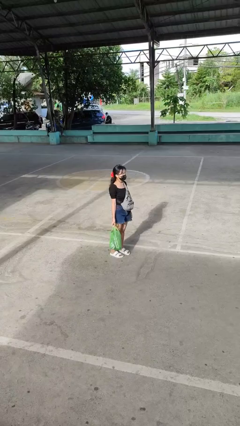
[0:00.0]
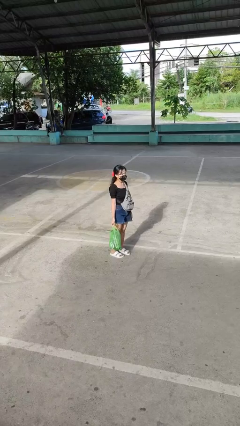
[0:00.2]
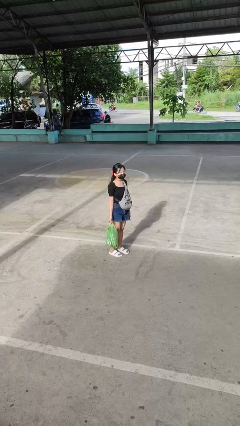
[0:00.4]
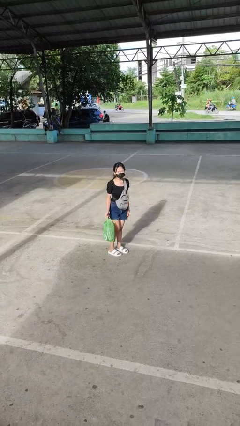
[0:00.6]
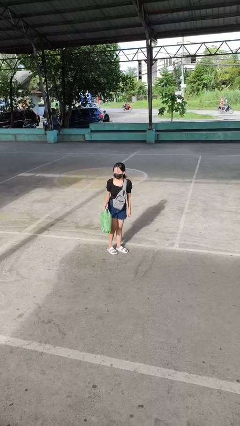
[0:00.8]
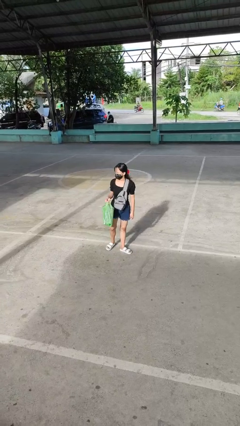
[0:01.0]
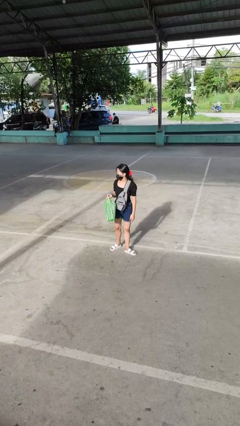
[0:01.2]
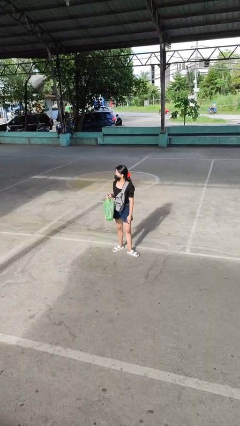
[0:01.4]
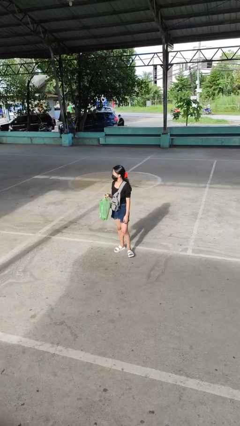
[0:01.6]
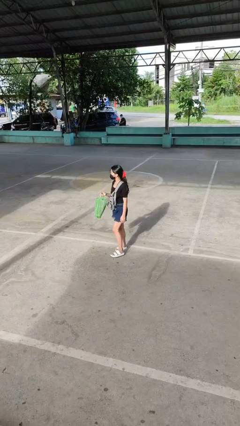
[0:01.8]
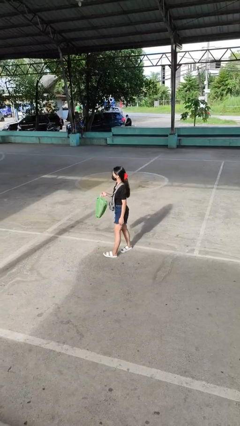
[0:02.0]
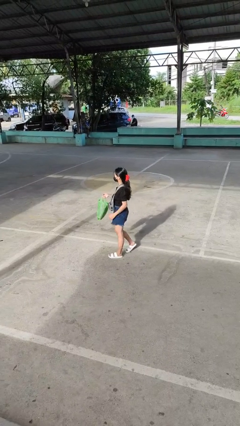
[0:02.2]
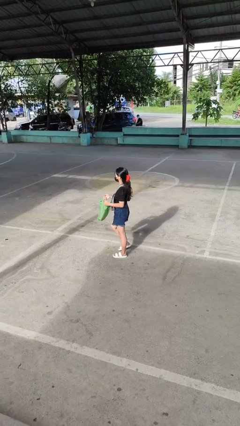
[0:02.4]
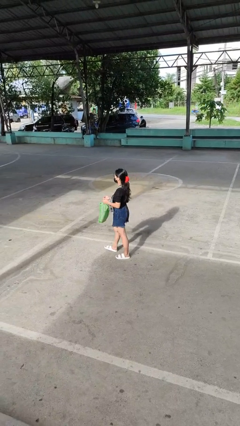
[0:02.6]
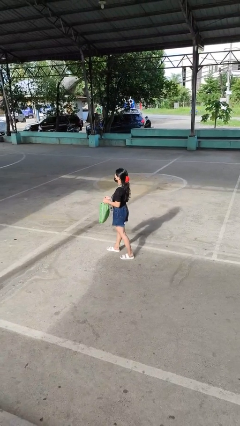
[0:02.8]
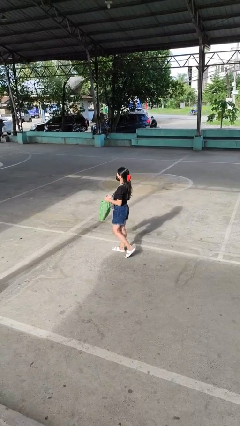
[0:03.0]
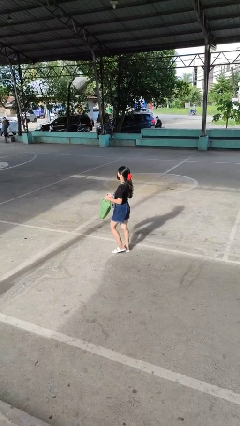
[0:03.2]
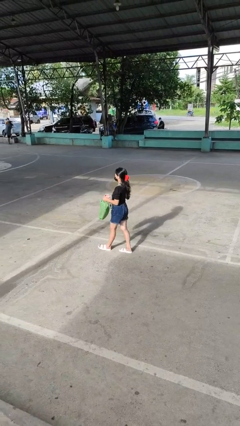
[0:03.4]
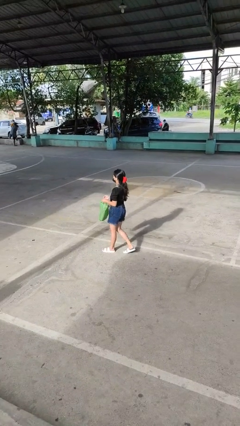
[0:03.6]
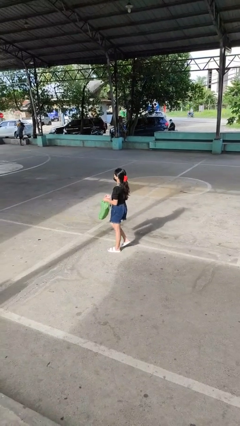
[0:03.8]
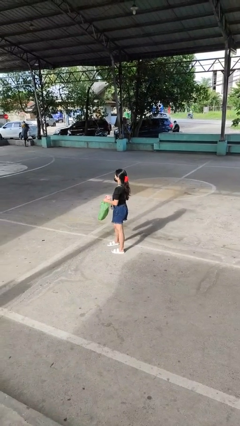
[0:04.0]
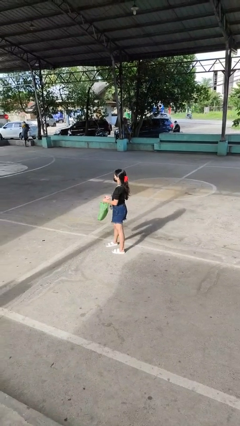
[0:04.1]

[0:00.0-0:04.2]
person carries groceries

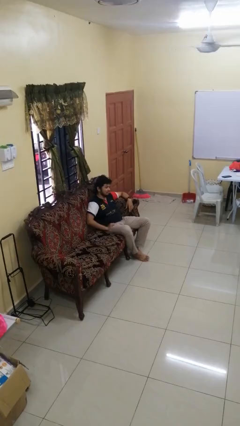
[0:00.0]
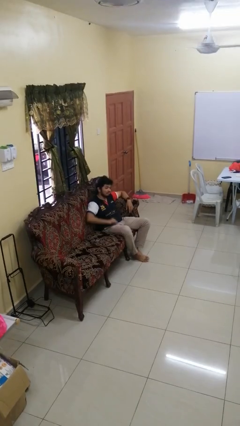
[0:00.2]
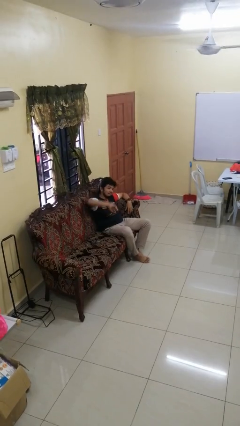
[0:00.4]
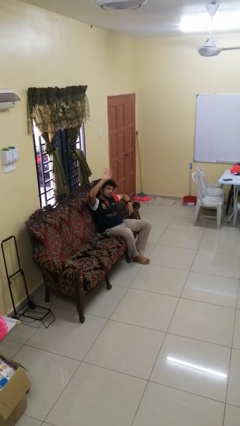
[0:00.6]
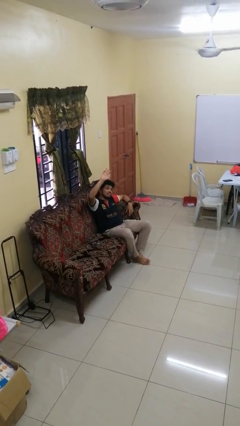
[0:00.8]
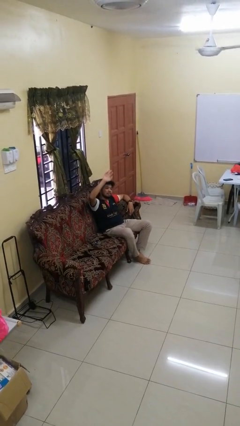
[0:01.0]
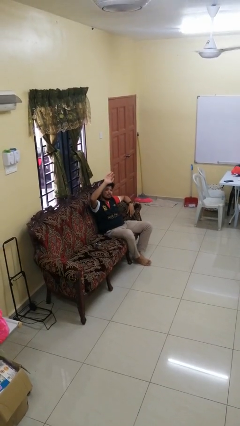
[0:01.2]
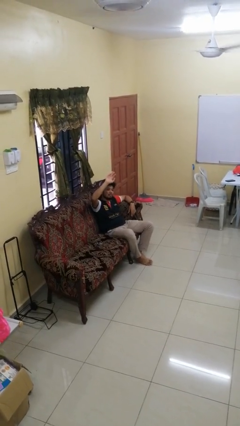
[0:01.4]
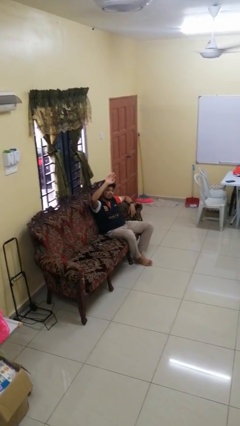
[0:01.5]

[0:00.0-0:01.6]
person gestures swipe up

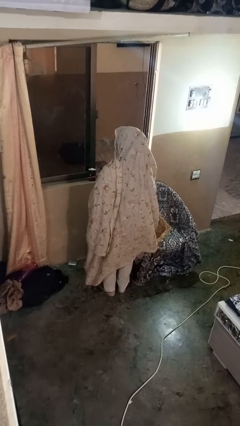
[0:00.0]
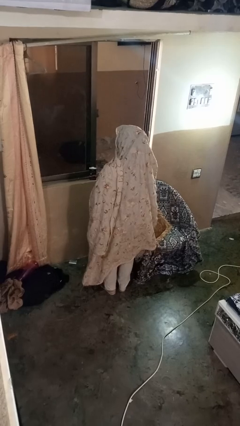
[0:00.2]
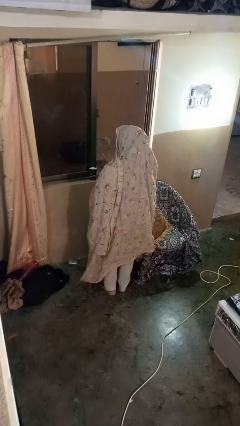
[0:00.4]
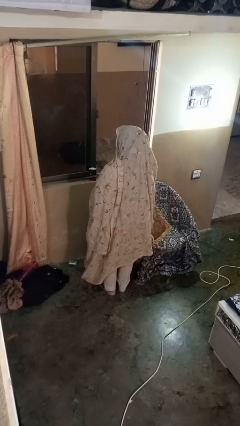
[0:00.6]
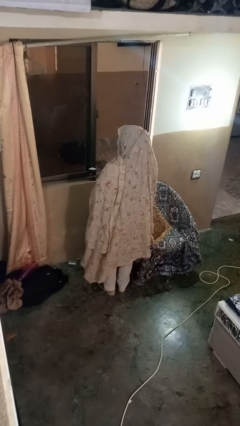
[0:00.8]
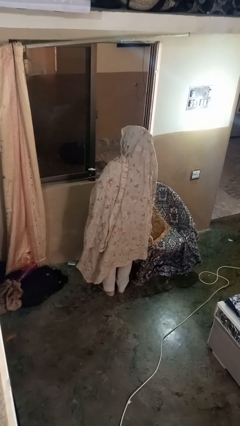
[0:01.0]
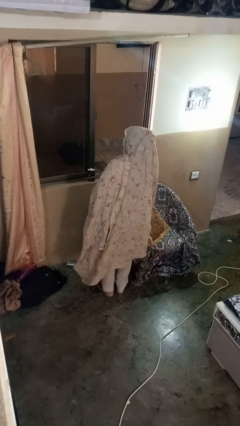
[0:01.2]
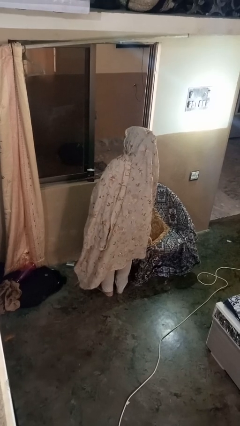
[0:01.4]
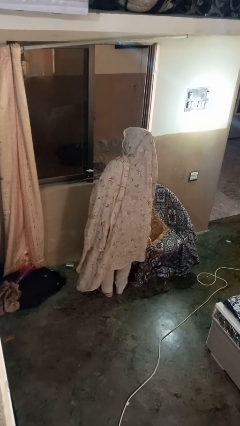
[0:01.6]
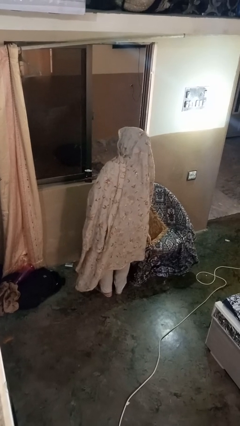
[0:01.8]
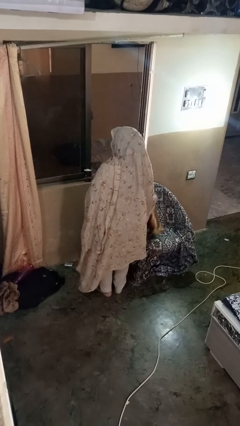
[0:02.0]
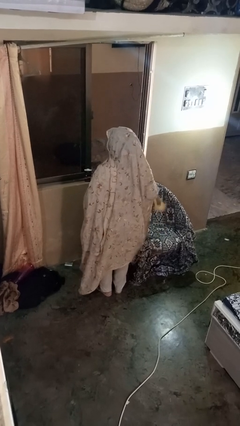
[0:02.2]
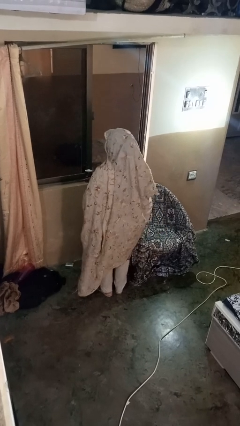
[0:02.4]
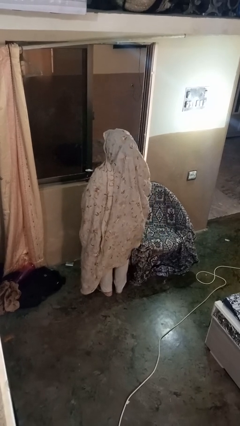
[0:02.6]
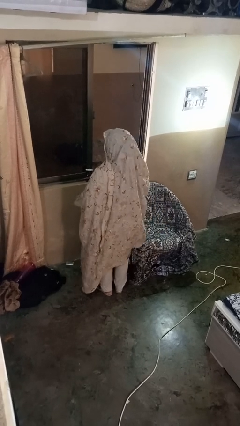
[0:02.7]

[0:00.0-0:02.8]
person picks up object from couch

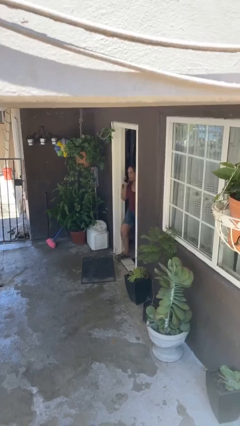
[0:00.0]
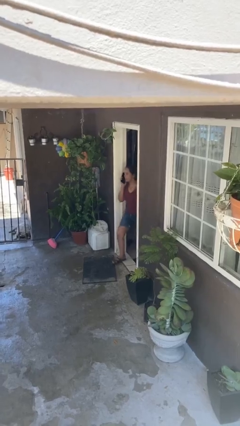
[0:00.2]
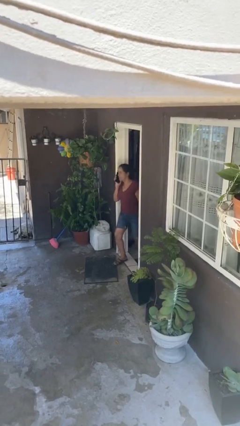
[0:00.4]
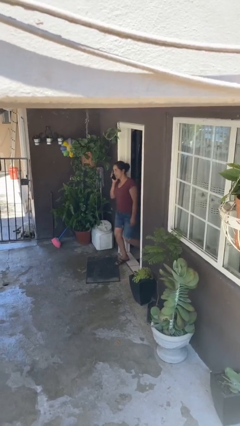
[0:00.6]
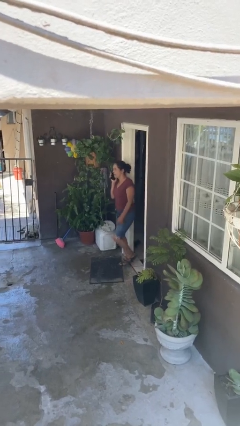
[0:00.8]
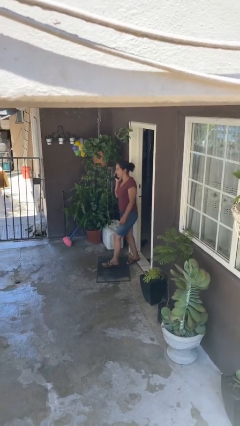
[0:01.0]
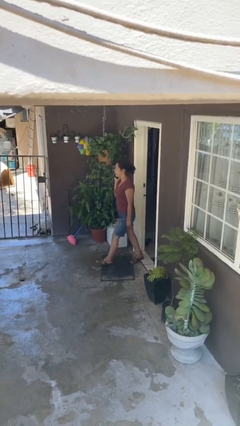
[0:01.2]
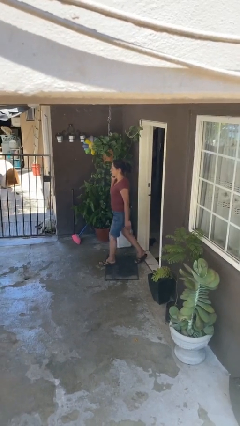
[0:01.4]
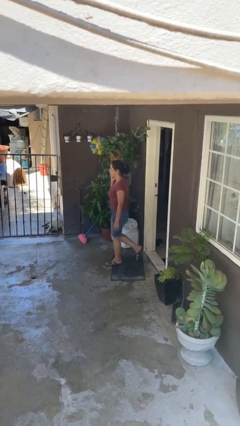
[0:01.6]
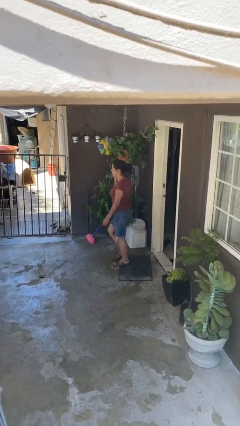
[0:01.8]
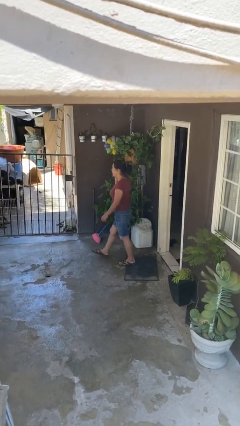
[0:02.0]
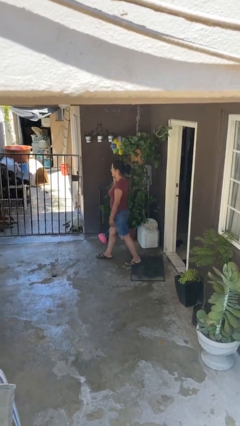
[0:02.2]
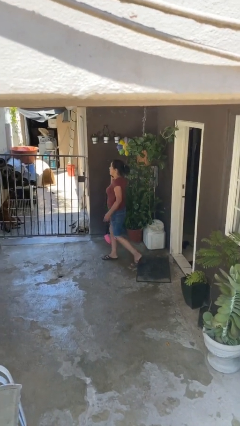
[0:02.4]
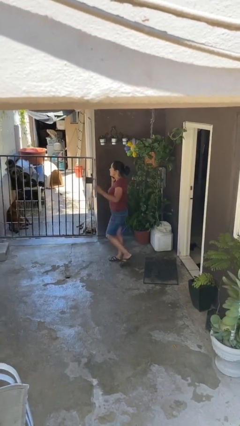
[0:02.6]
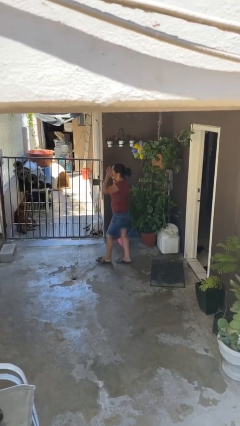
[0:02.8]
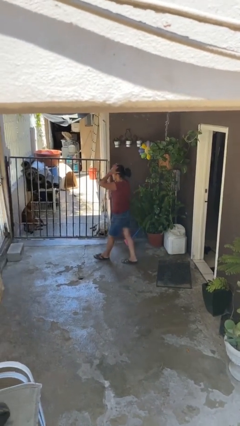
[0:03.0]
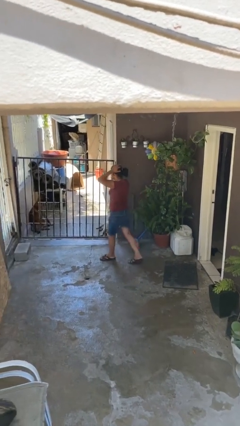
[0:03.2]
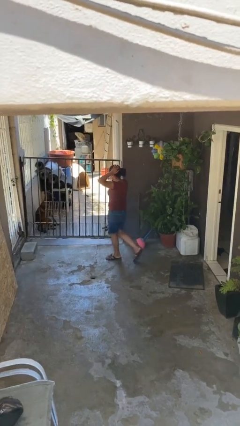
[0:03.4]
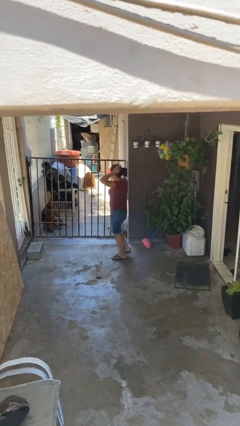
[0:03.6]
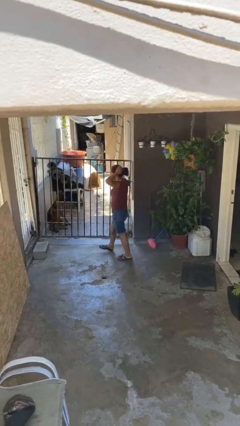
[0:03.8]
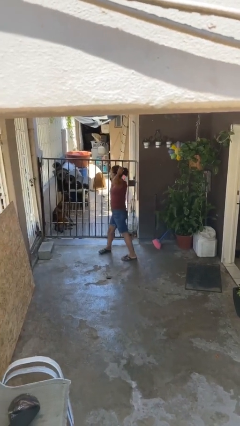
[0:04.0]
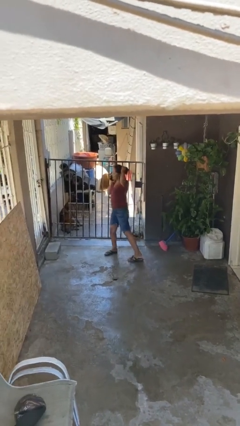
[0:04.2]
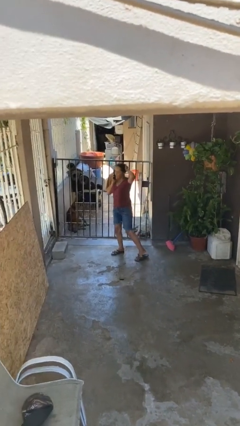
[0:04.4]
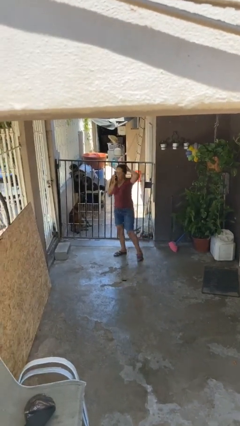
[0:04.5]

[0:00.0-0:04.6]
person enters scene through structure

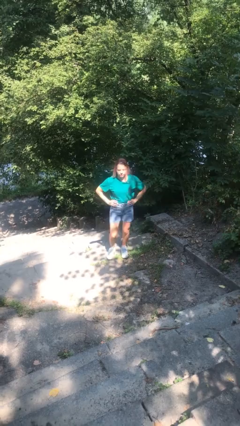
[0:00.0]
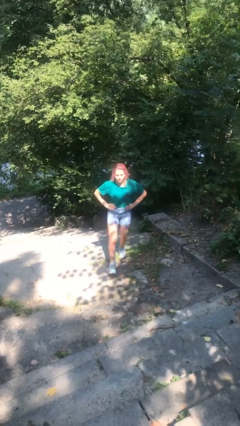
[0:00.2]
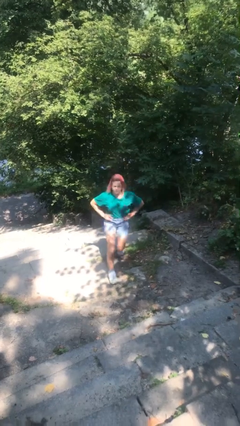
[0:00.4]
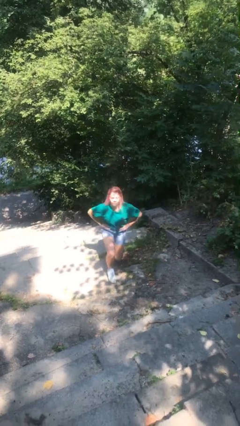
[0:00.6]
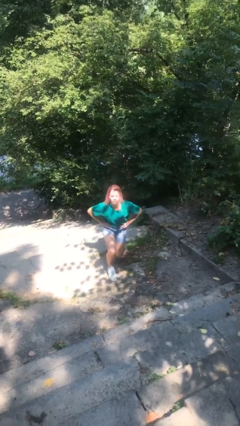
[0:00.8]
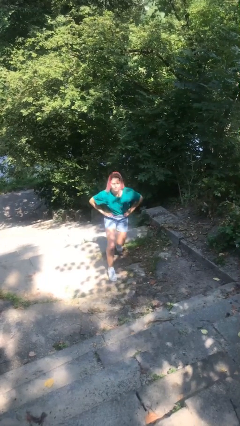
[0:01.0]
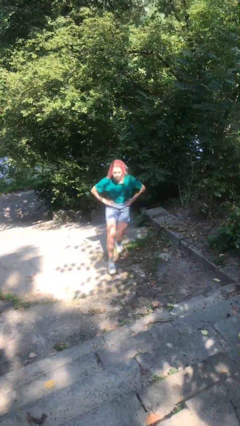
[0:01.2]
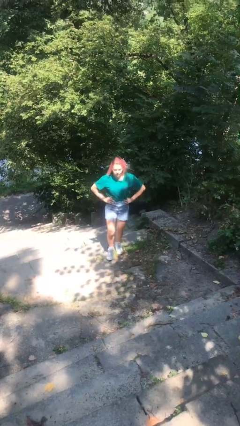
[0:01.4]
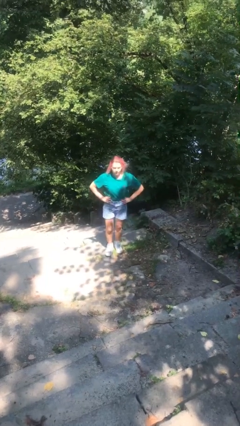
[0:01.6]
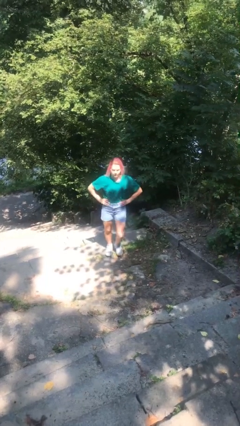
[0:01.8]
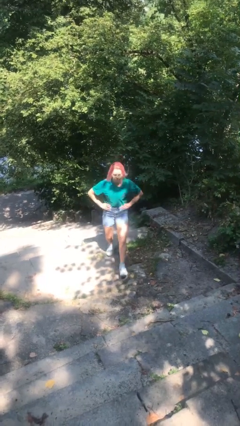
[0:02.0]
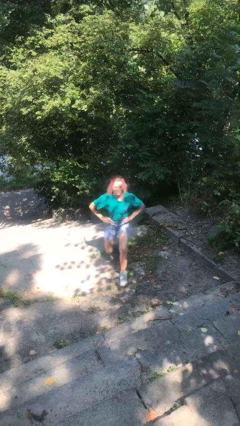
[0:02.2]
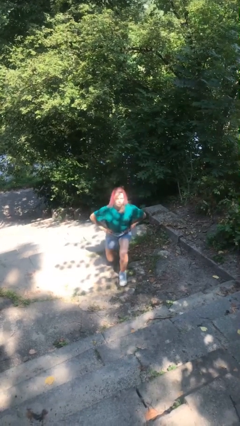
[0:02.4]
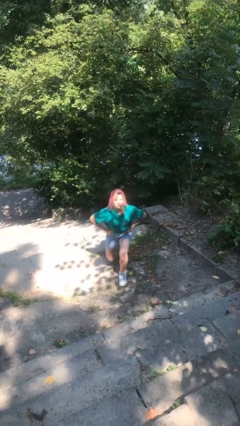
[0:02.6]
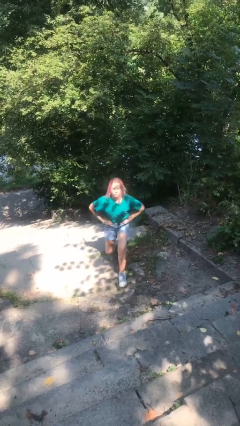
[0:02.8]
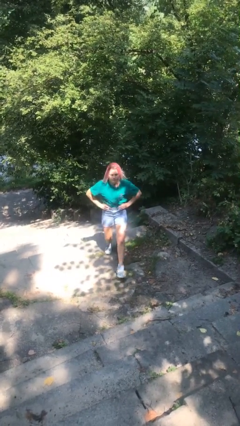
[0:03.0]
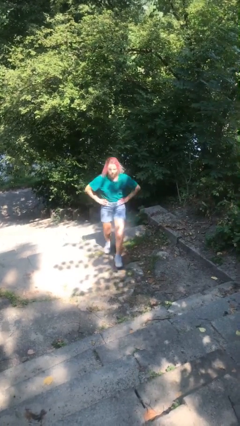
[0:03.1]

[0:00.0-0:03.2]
person exercises with lunges

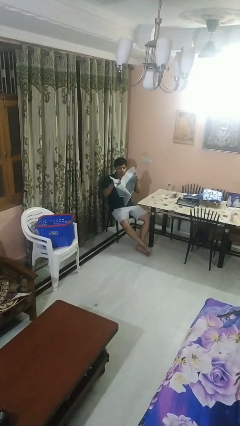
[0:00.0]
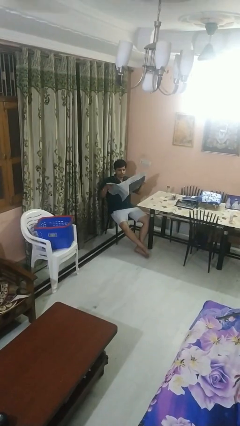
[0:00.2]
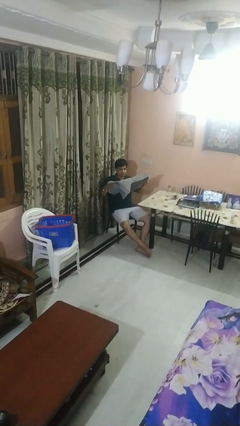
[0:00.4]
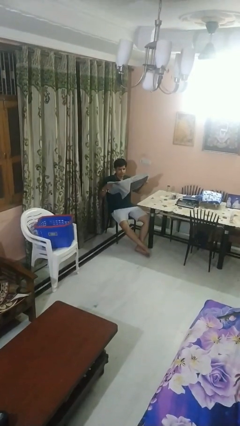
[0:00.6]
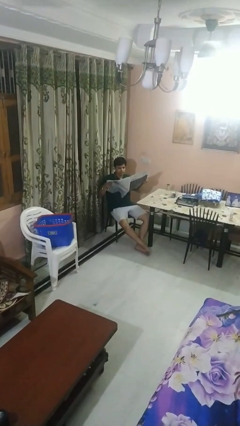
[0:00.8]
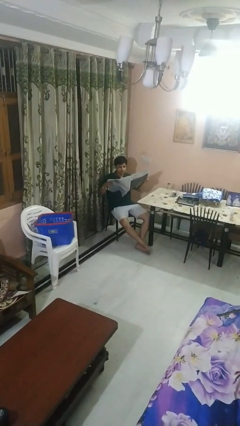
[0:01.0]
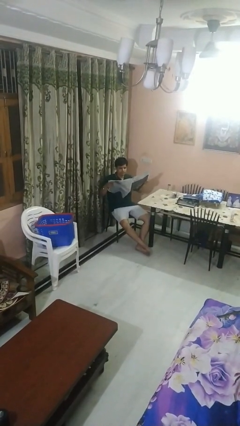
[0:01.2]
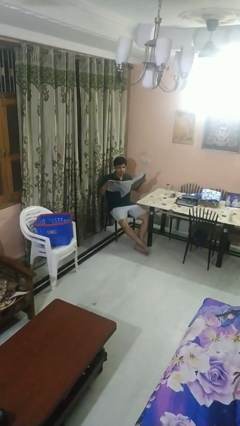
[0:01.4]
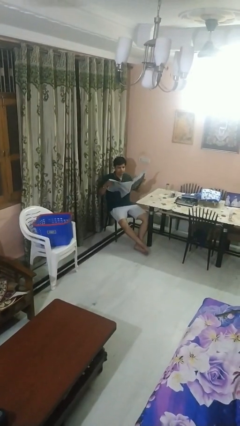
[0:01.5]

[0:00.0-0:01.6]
person reads newspaper
